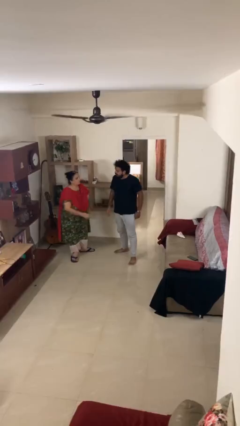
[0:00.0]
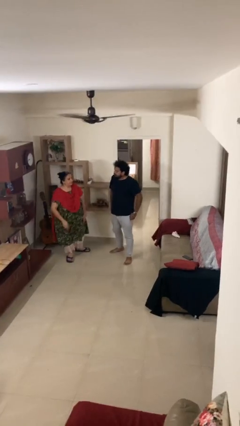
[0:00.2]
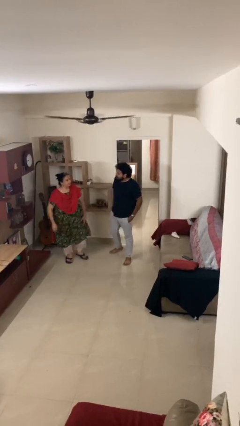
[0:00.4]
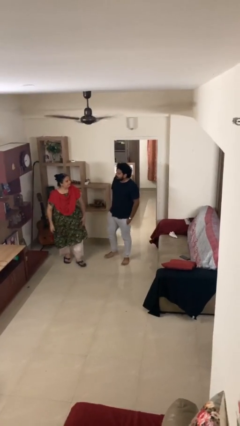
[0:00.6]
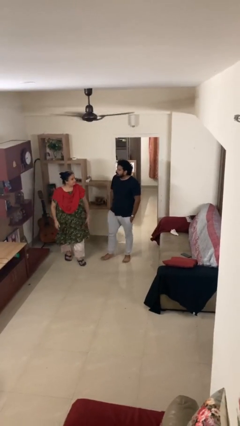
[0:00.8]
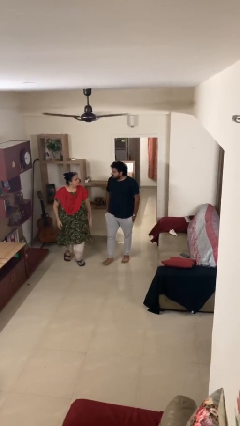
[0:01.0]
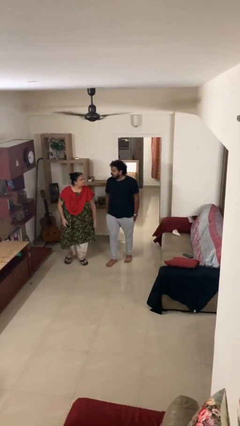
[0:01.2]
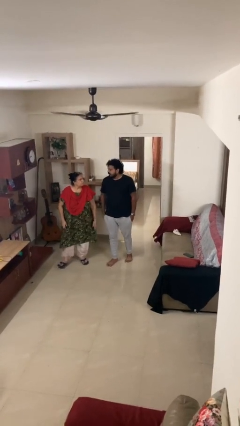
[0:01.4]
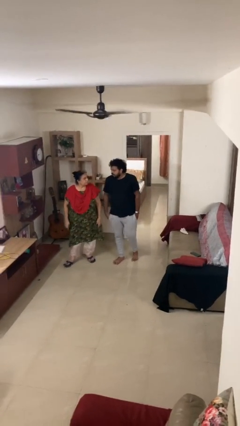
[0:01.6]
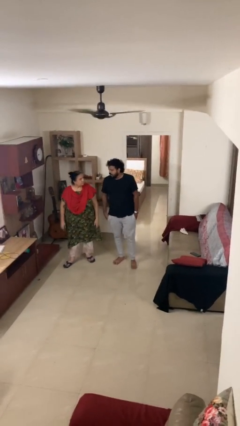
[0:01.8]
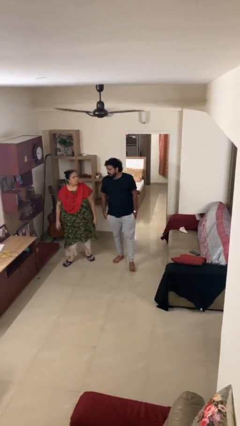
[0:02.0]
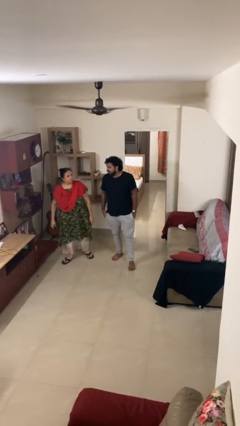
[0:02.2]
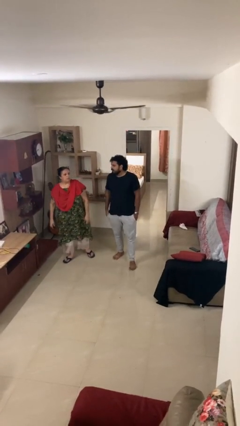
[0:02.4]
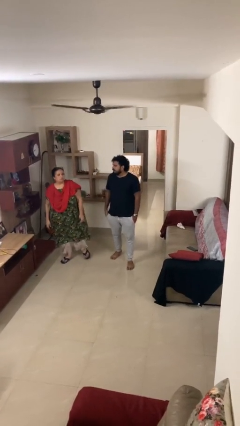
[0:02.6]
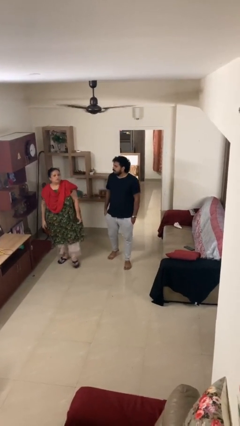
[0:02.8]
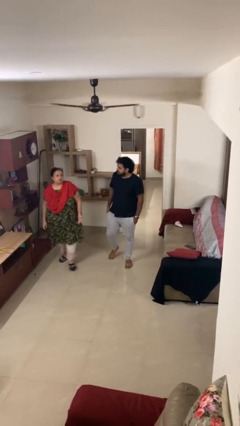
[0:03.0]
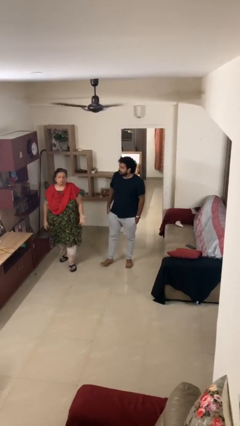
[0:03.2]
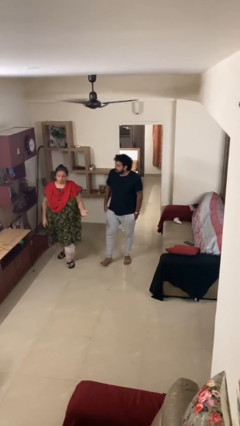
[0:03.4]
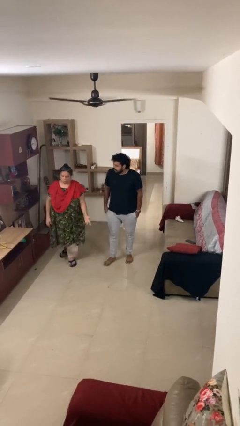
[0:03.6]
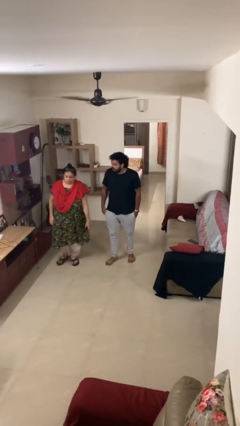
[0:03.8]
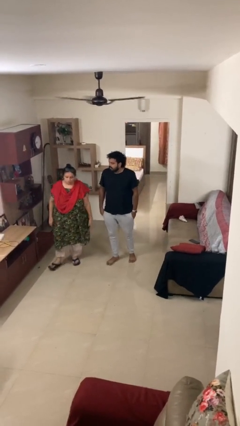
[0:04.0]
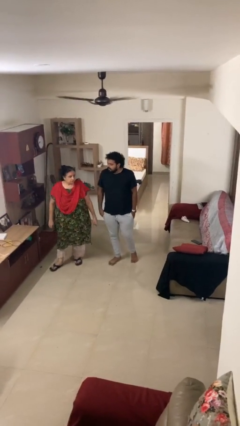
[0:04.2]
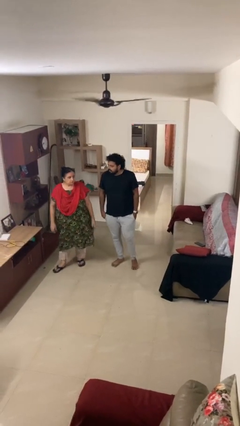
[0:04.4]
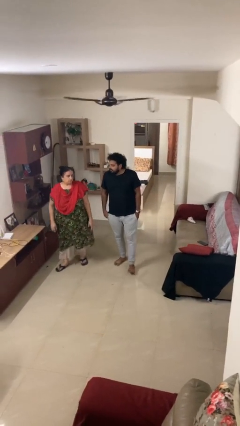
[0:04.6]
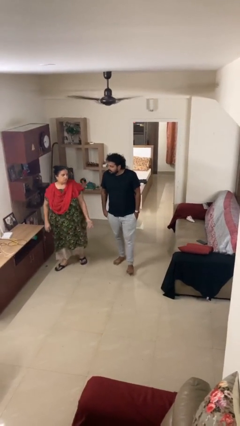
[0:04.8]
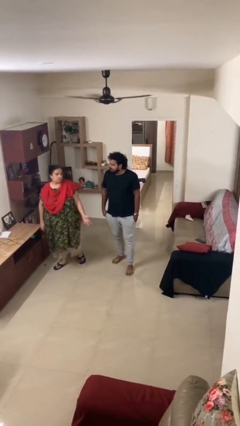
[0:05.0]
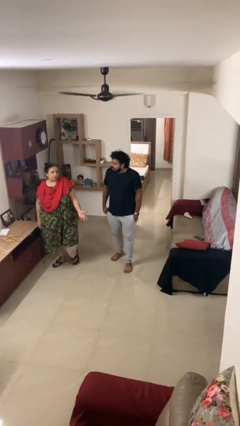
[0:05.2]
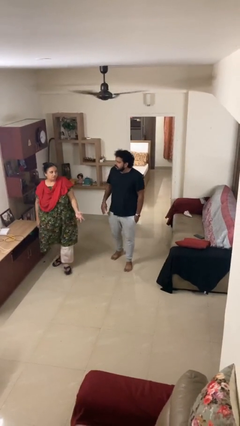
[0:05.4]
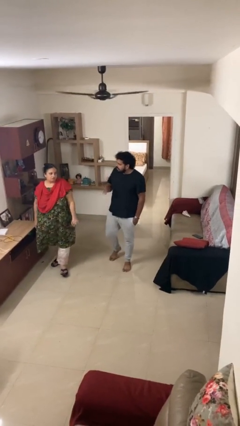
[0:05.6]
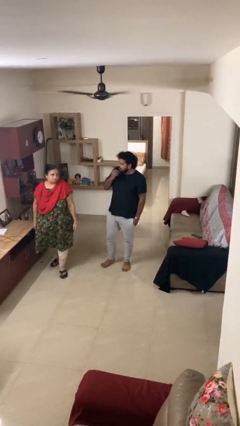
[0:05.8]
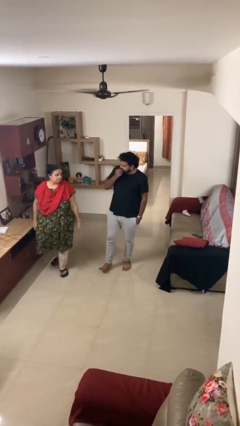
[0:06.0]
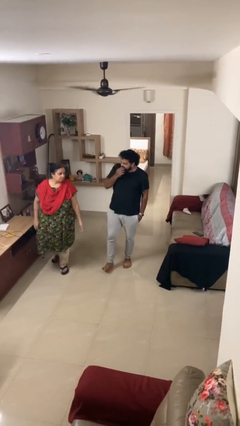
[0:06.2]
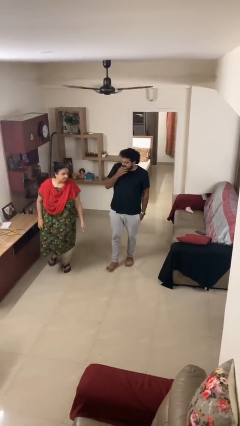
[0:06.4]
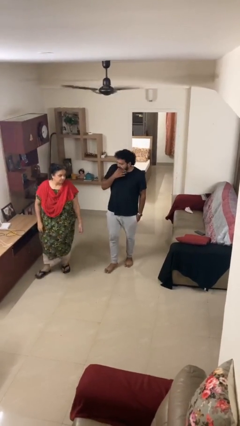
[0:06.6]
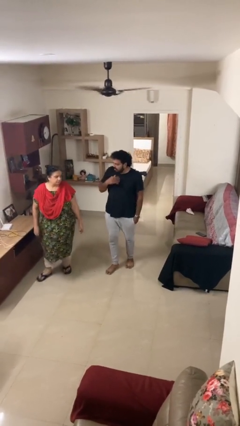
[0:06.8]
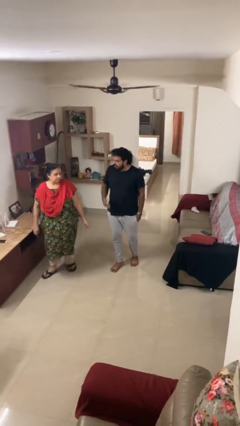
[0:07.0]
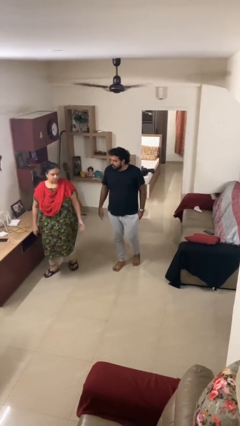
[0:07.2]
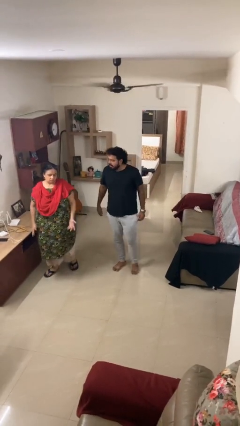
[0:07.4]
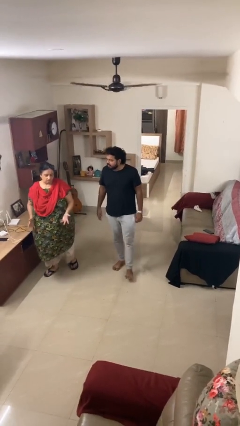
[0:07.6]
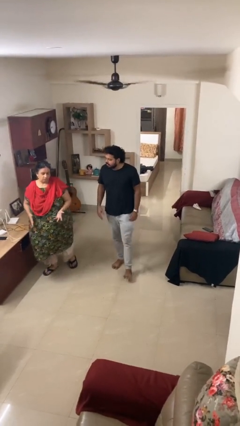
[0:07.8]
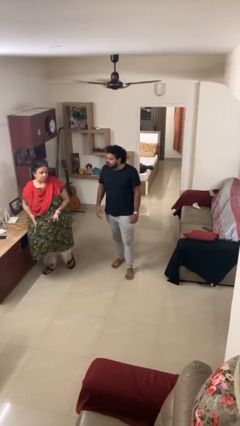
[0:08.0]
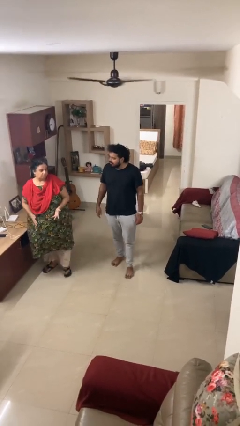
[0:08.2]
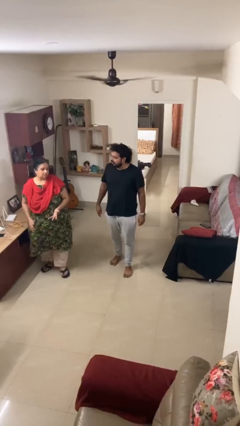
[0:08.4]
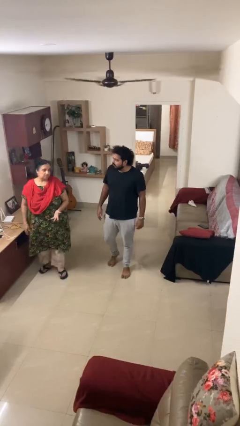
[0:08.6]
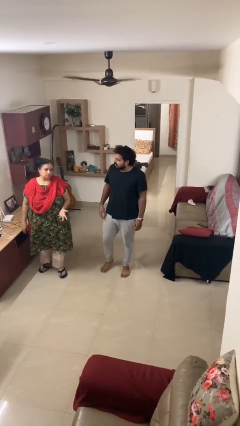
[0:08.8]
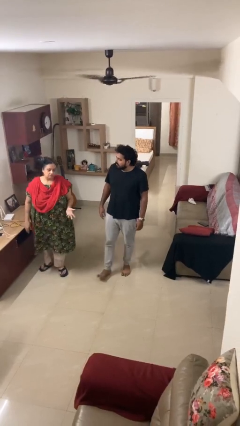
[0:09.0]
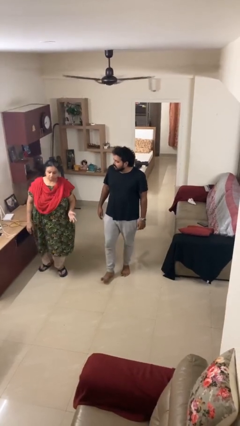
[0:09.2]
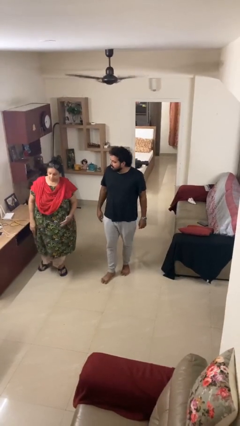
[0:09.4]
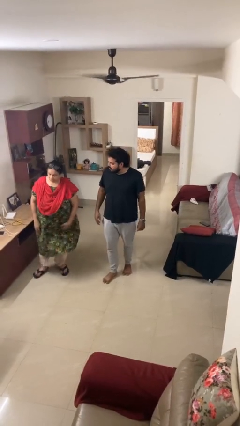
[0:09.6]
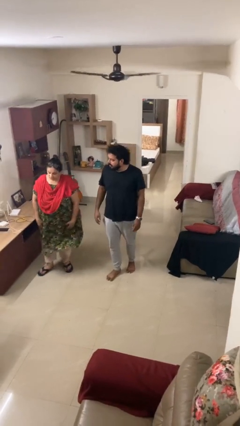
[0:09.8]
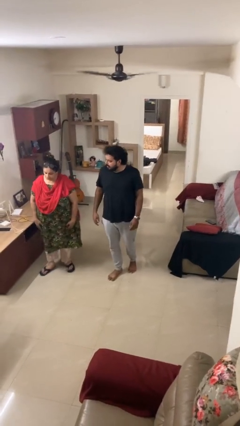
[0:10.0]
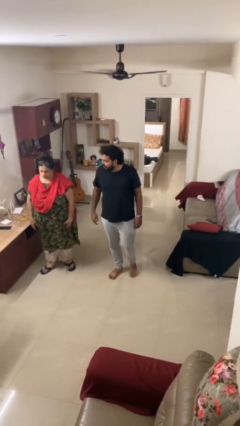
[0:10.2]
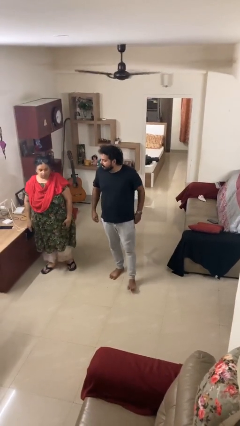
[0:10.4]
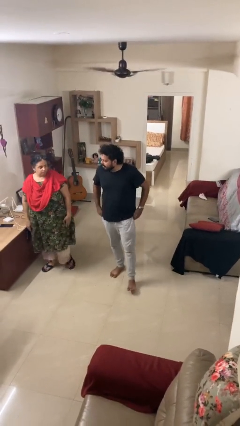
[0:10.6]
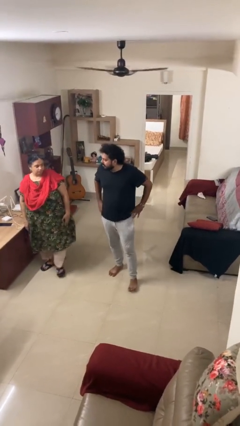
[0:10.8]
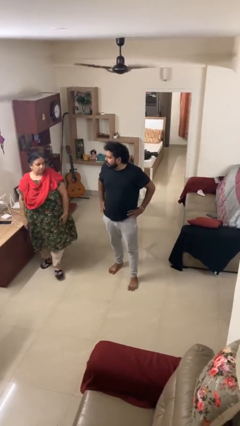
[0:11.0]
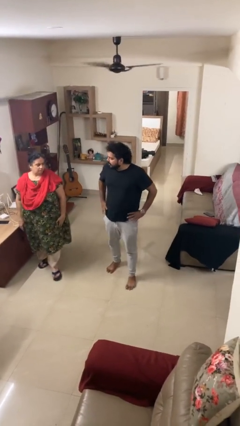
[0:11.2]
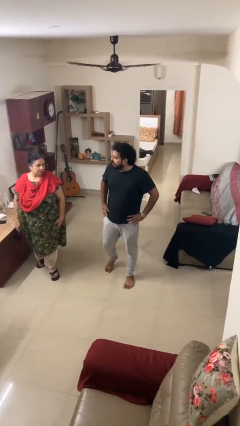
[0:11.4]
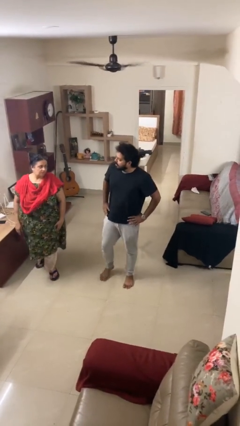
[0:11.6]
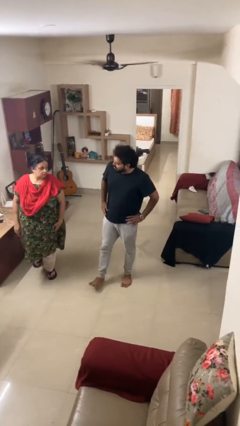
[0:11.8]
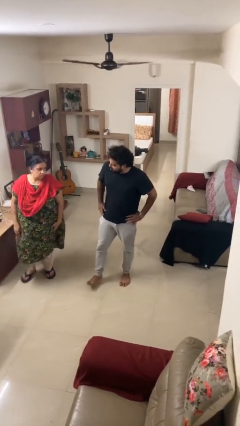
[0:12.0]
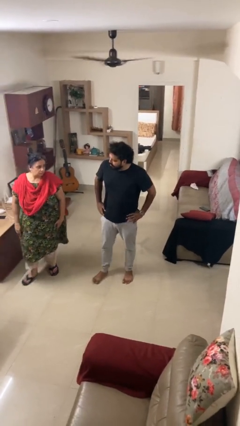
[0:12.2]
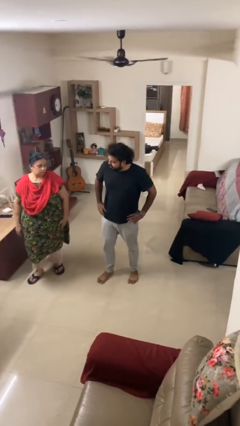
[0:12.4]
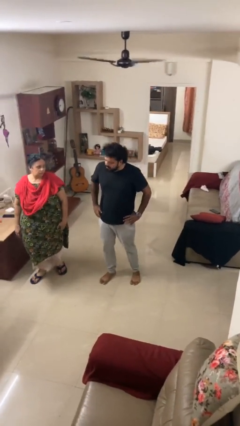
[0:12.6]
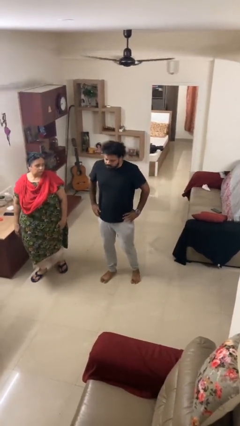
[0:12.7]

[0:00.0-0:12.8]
person talks to person

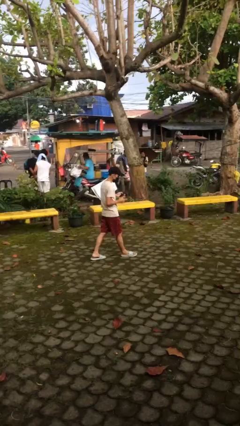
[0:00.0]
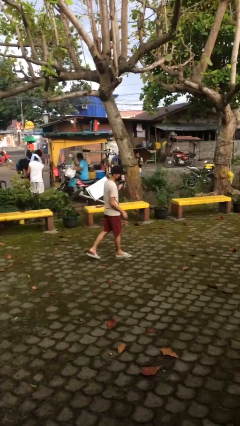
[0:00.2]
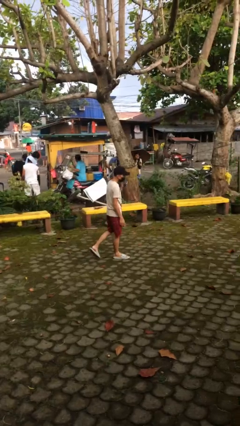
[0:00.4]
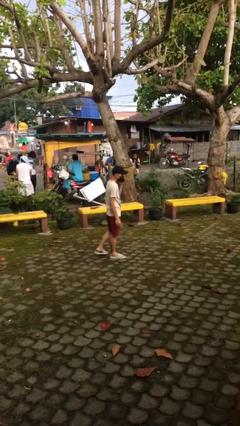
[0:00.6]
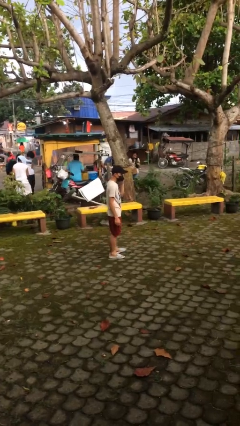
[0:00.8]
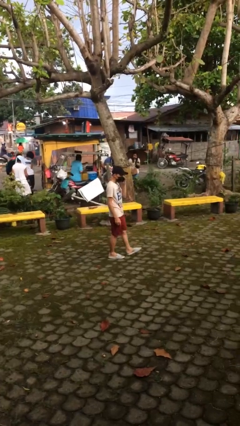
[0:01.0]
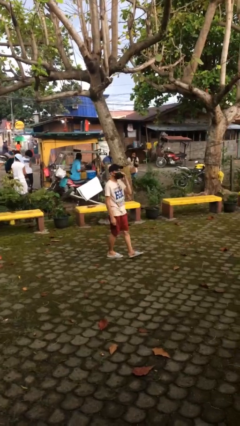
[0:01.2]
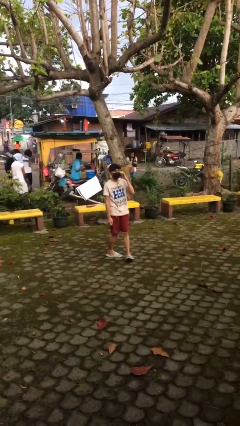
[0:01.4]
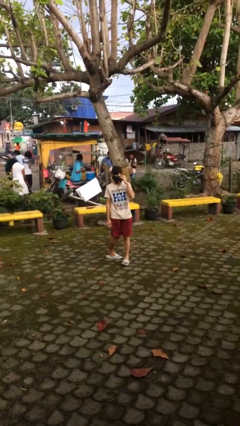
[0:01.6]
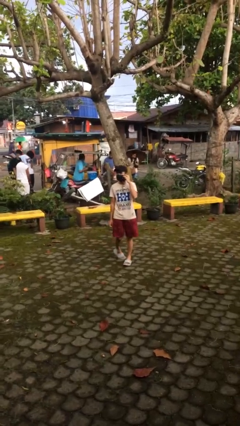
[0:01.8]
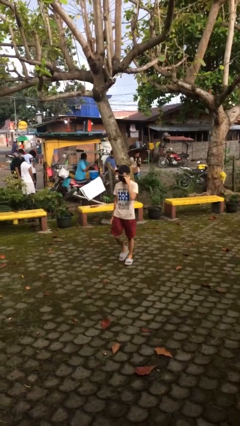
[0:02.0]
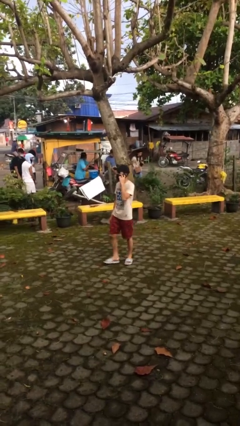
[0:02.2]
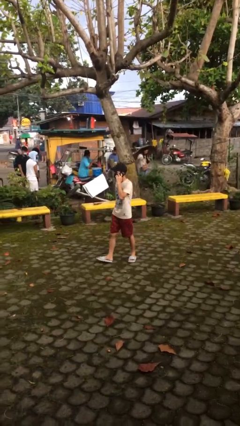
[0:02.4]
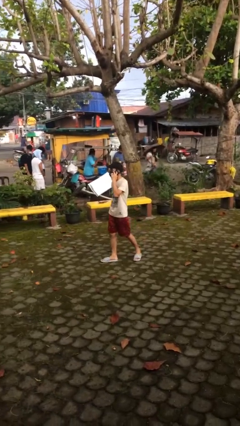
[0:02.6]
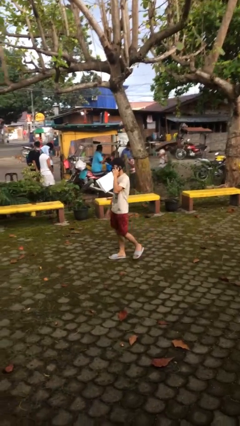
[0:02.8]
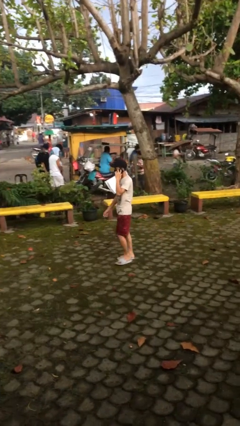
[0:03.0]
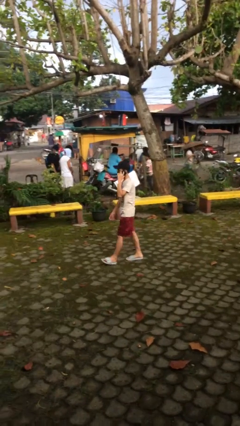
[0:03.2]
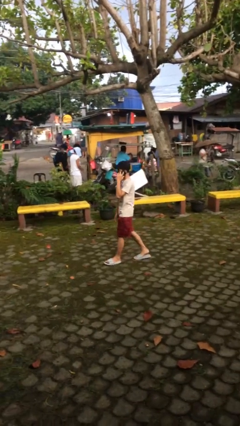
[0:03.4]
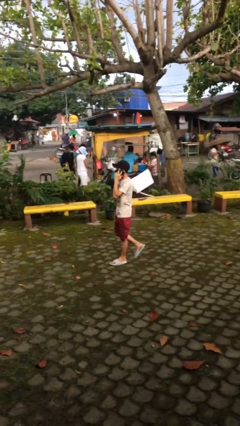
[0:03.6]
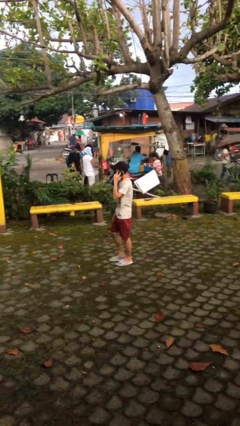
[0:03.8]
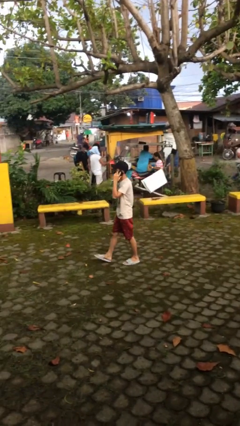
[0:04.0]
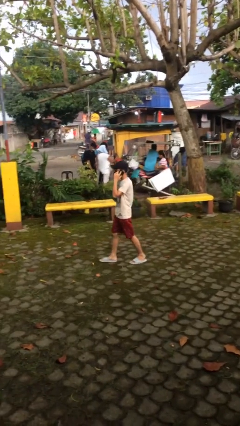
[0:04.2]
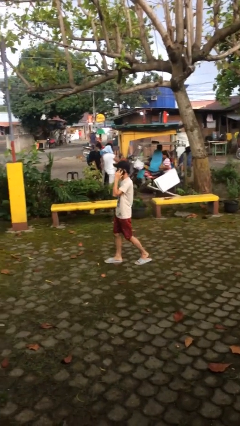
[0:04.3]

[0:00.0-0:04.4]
person talks on phone

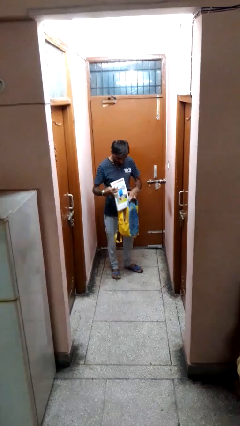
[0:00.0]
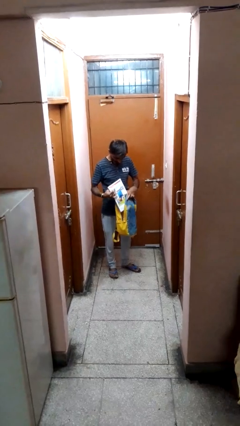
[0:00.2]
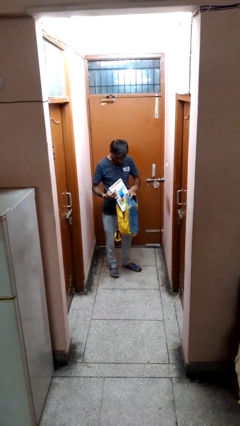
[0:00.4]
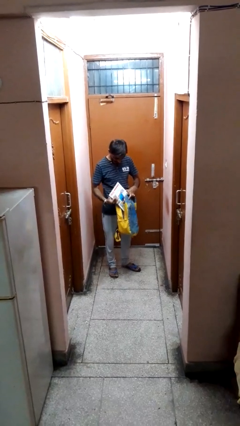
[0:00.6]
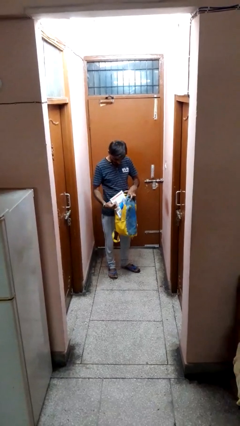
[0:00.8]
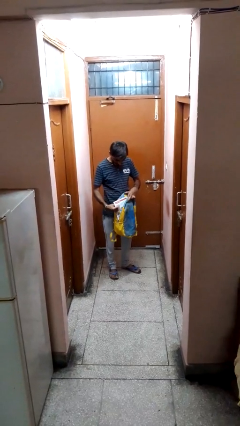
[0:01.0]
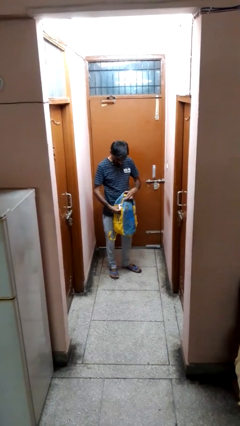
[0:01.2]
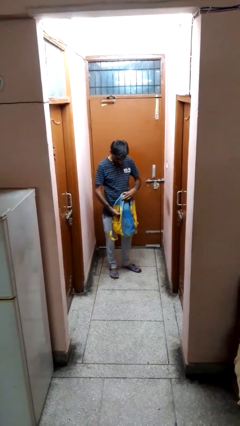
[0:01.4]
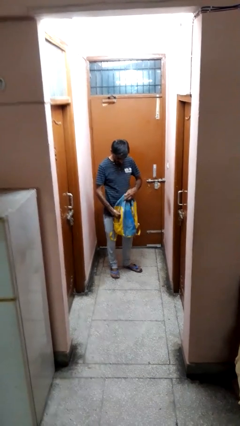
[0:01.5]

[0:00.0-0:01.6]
person puts object into backpack
